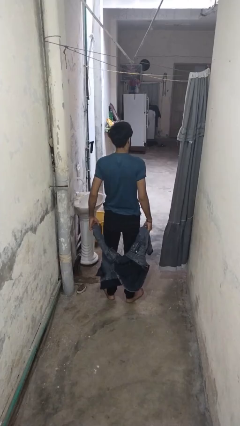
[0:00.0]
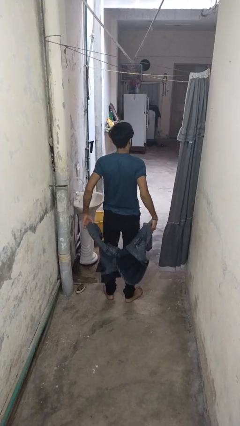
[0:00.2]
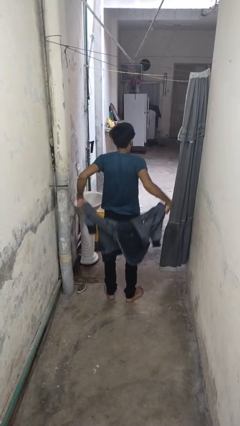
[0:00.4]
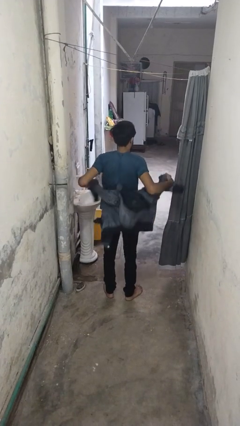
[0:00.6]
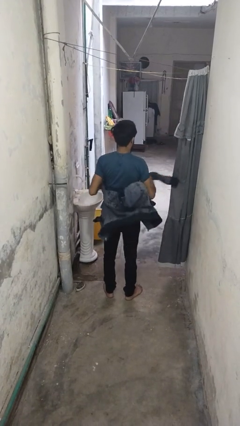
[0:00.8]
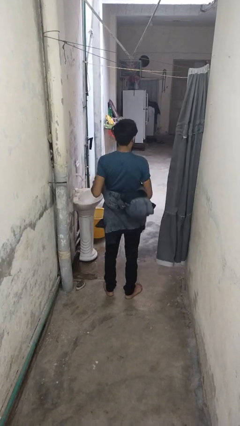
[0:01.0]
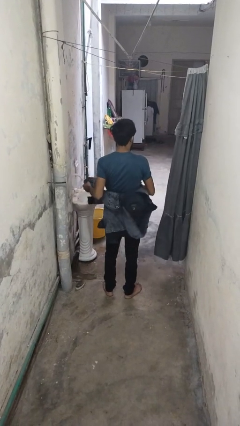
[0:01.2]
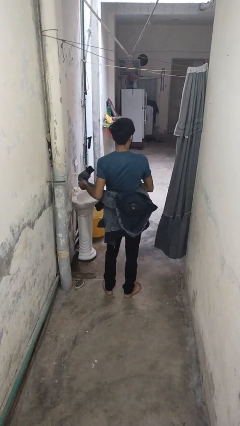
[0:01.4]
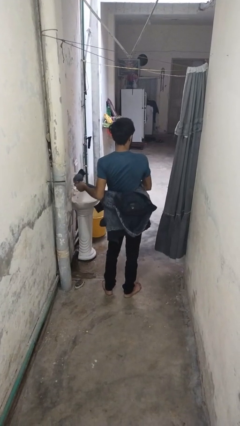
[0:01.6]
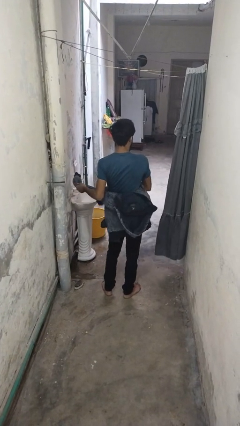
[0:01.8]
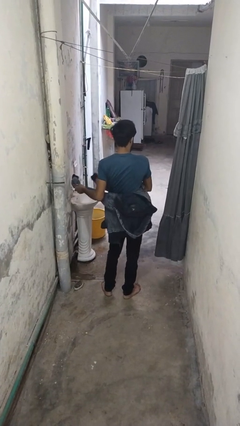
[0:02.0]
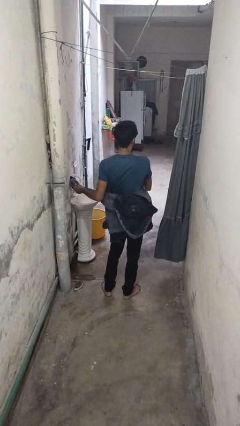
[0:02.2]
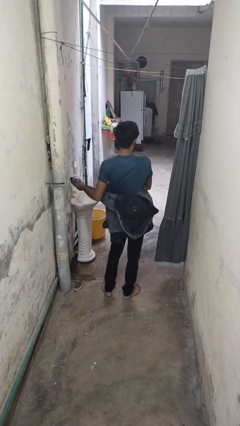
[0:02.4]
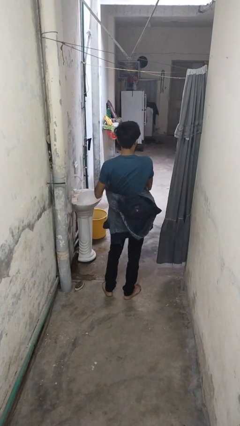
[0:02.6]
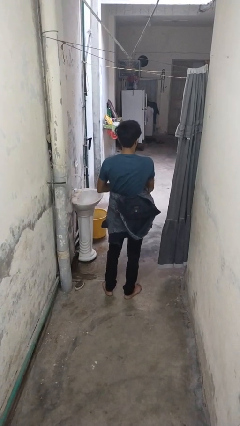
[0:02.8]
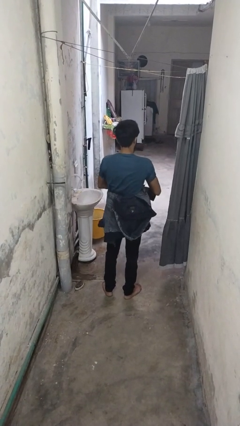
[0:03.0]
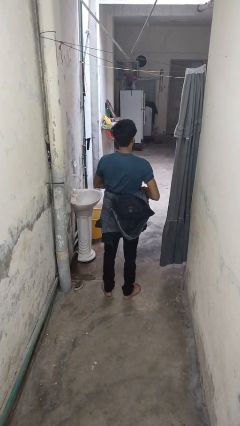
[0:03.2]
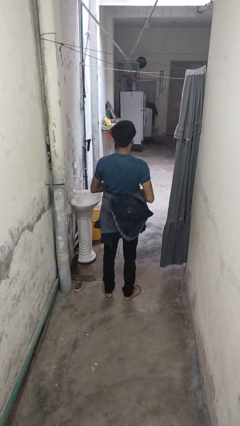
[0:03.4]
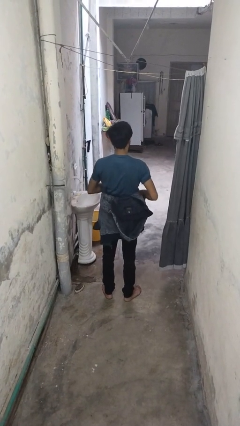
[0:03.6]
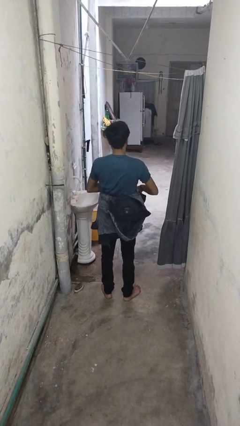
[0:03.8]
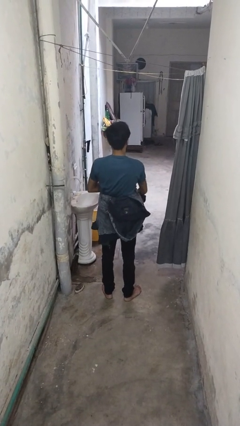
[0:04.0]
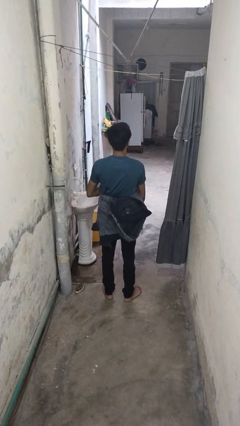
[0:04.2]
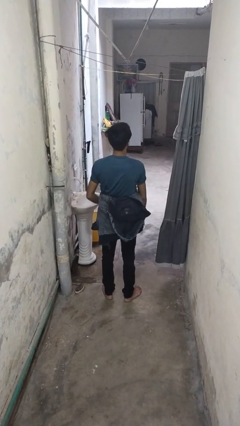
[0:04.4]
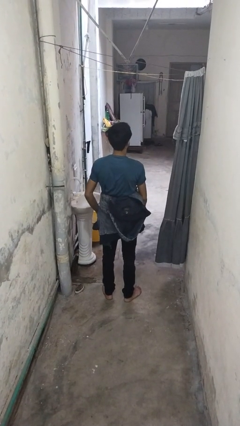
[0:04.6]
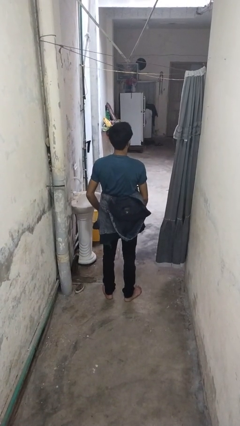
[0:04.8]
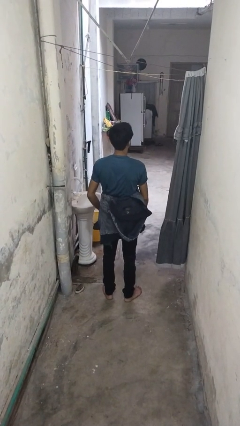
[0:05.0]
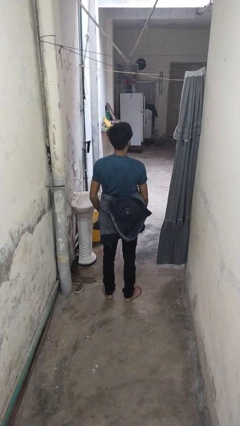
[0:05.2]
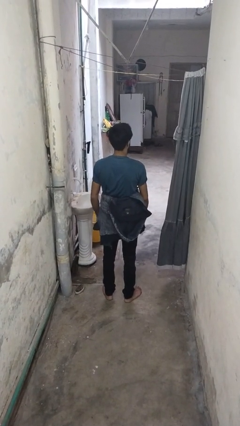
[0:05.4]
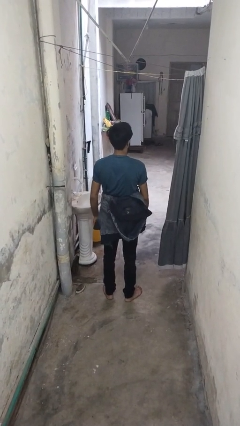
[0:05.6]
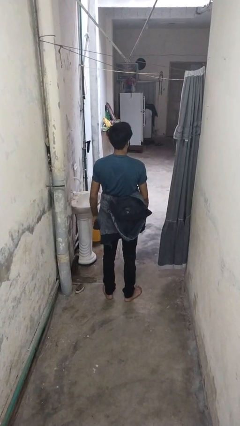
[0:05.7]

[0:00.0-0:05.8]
person ties jacket around waist

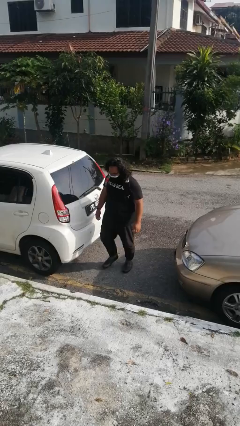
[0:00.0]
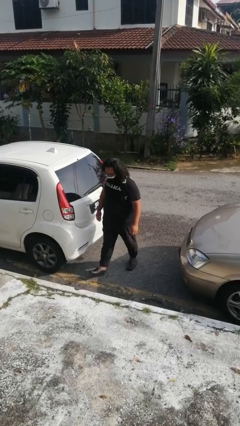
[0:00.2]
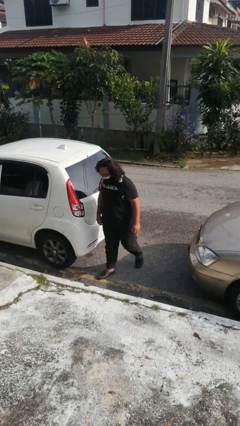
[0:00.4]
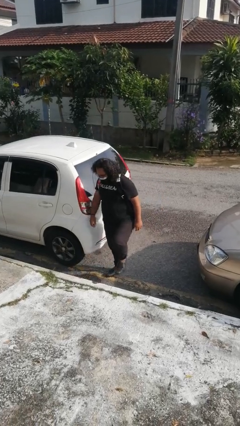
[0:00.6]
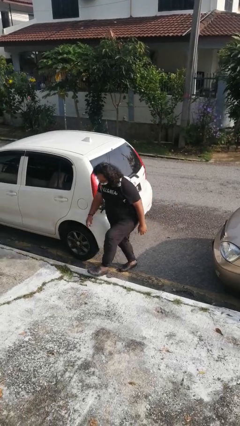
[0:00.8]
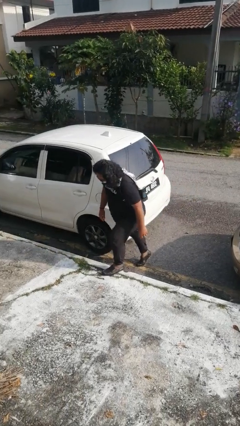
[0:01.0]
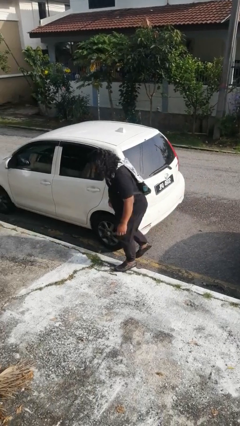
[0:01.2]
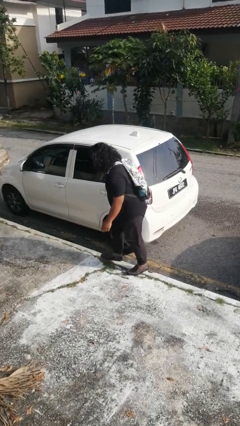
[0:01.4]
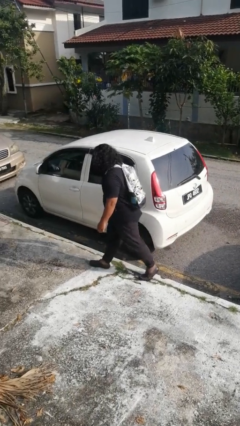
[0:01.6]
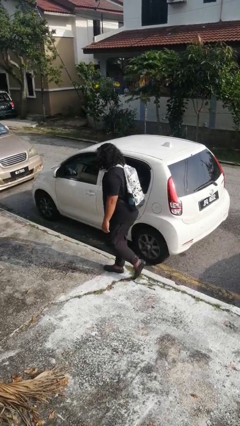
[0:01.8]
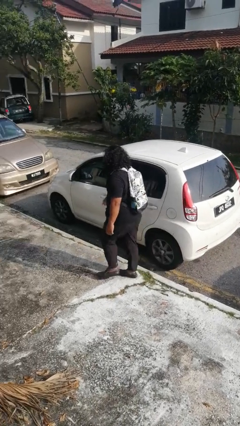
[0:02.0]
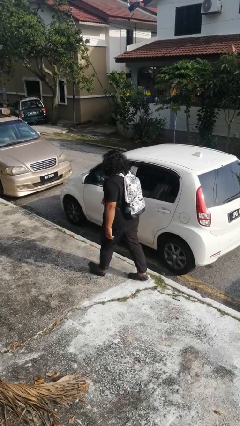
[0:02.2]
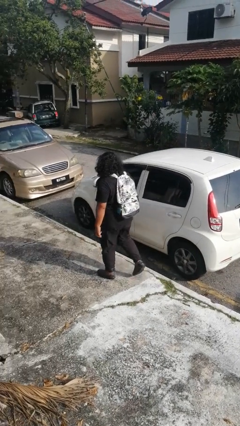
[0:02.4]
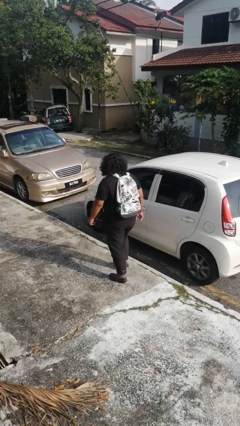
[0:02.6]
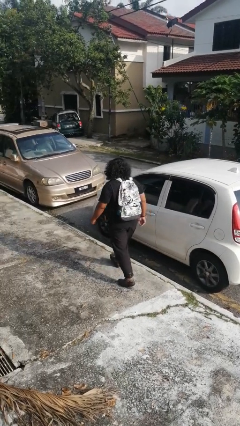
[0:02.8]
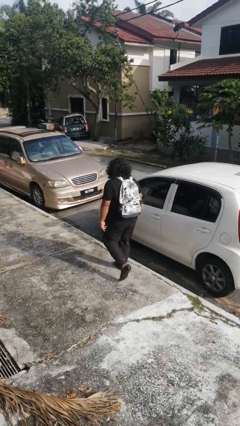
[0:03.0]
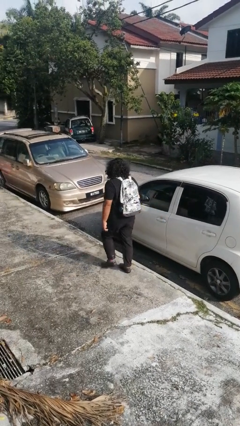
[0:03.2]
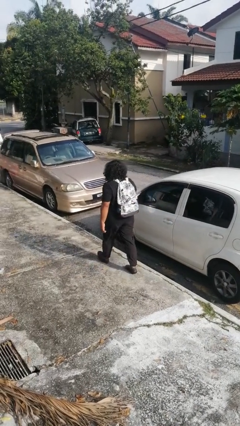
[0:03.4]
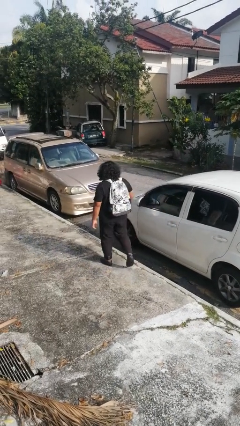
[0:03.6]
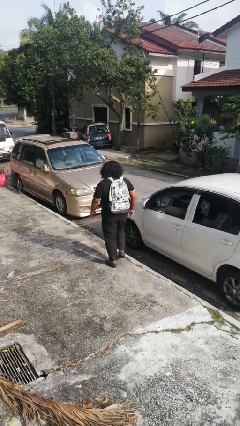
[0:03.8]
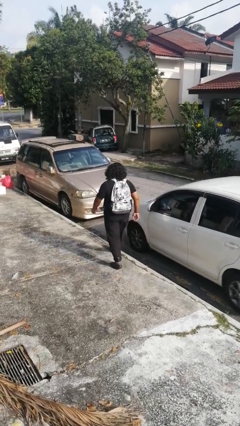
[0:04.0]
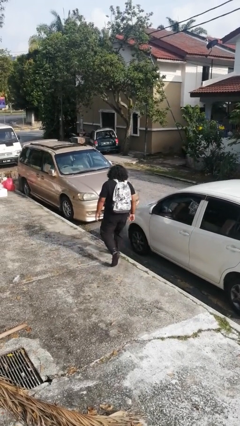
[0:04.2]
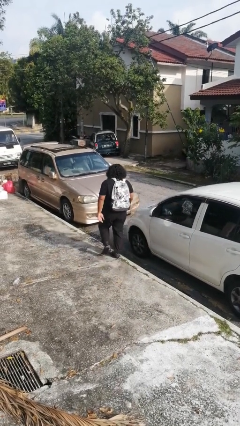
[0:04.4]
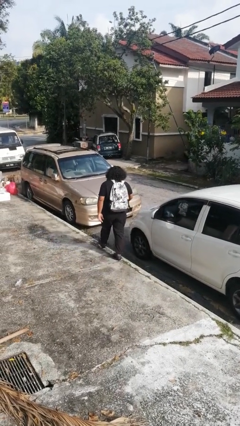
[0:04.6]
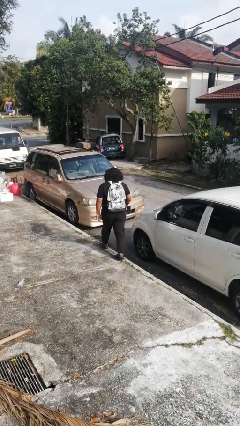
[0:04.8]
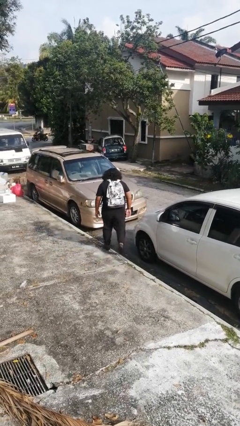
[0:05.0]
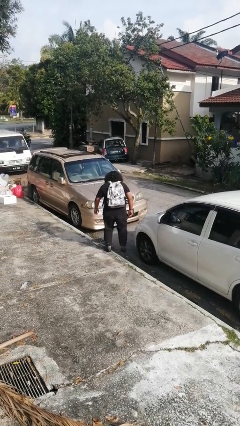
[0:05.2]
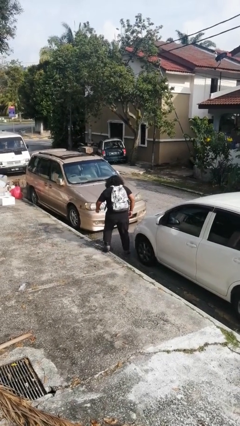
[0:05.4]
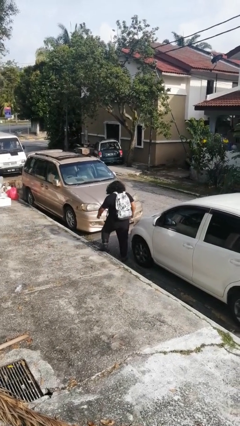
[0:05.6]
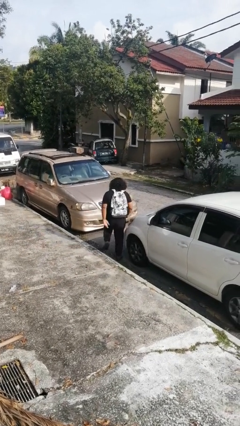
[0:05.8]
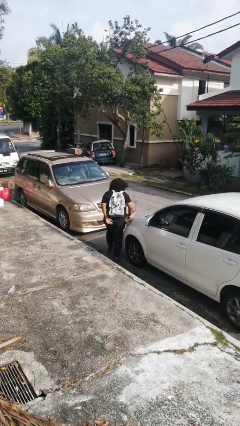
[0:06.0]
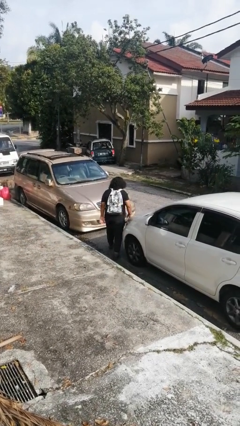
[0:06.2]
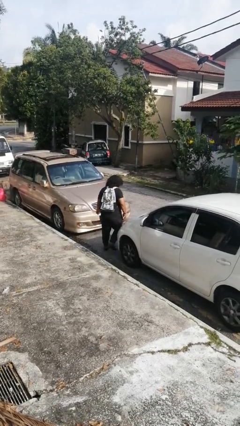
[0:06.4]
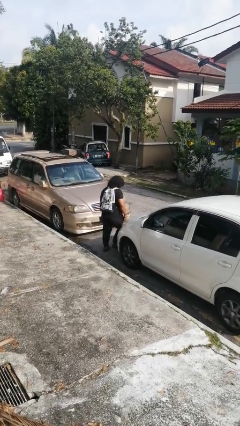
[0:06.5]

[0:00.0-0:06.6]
person walks around car

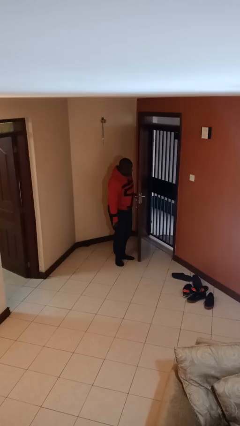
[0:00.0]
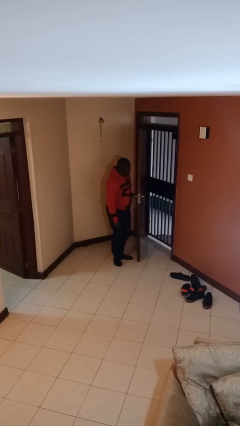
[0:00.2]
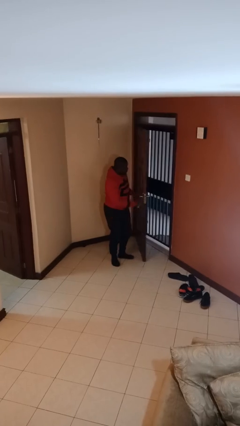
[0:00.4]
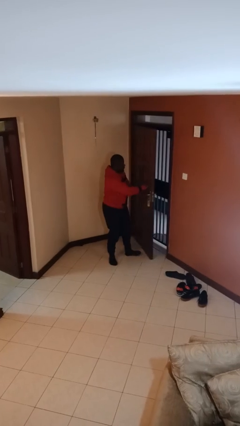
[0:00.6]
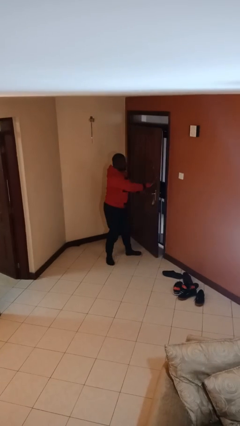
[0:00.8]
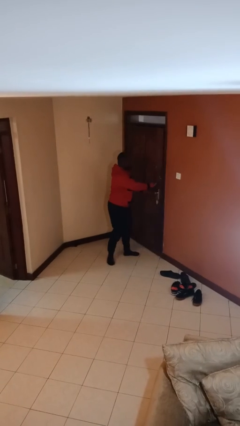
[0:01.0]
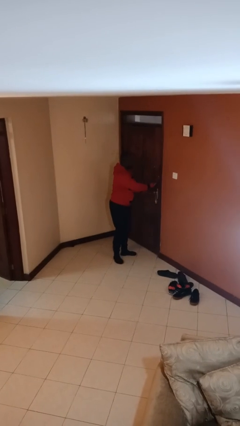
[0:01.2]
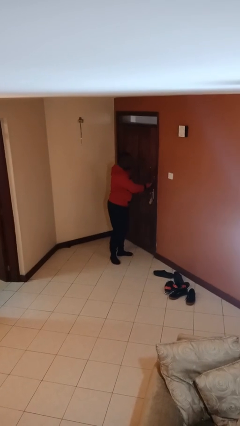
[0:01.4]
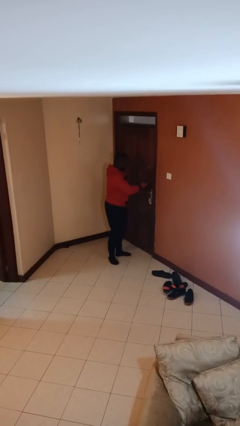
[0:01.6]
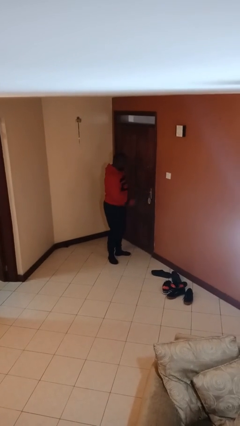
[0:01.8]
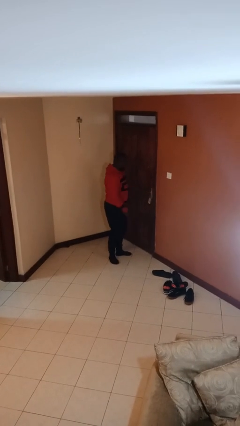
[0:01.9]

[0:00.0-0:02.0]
person closes facility door

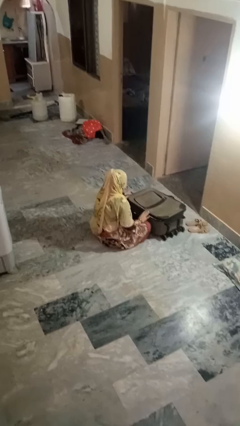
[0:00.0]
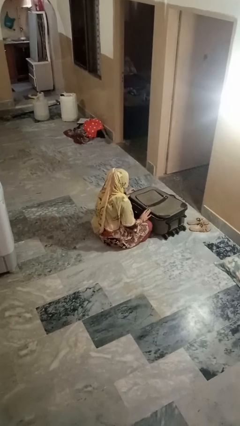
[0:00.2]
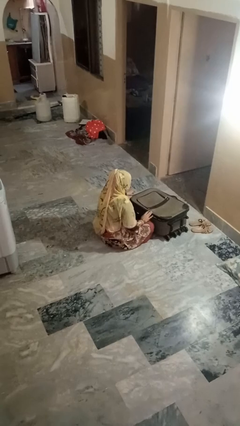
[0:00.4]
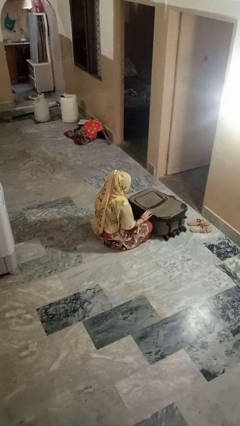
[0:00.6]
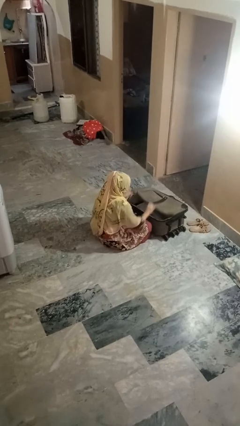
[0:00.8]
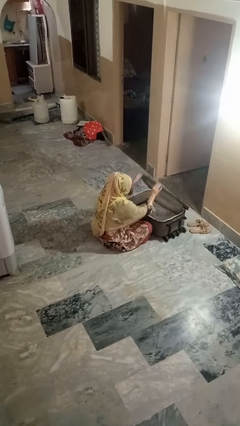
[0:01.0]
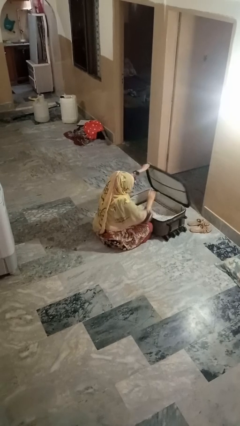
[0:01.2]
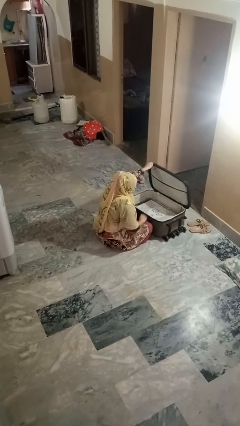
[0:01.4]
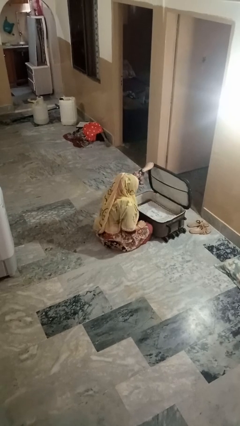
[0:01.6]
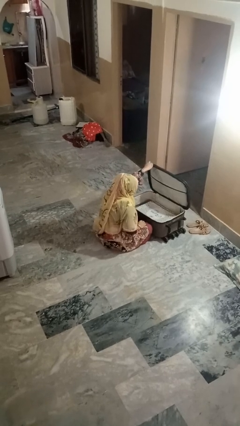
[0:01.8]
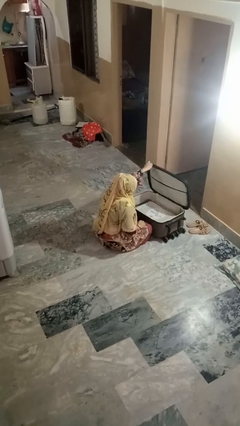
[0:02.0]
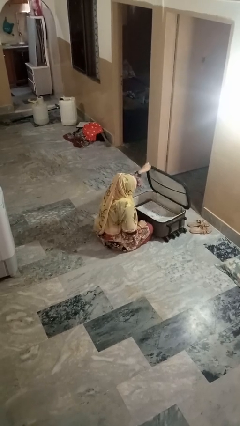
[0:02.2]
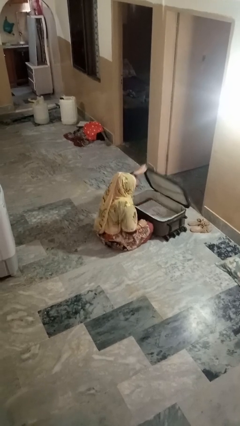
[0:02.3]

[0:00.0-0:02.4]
person opens suitcase

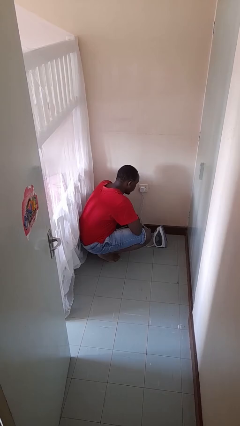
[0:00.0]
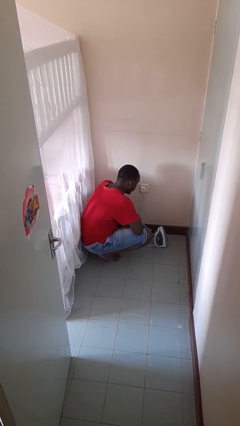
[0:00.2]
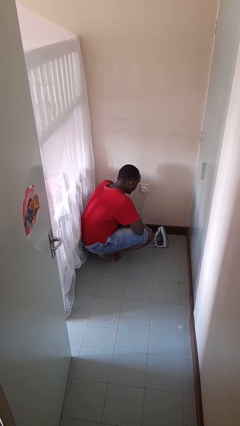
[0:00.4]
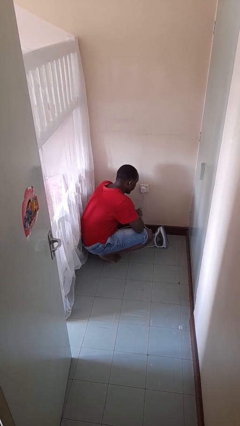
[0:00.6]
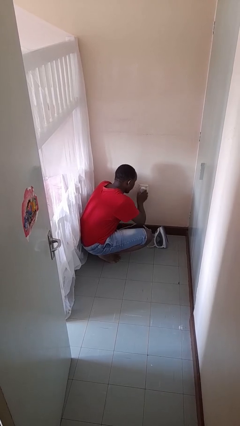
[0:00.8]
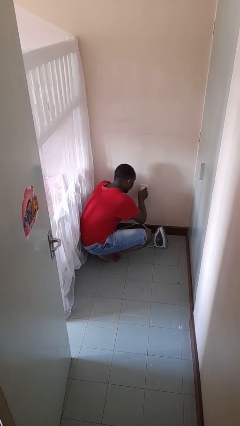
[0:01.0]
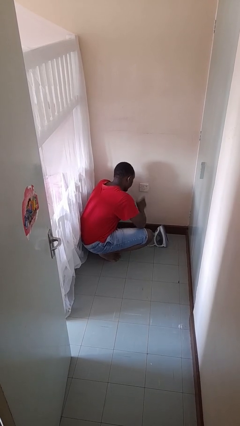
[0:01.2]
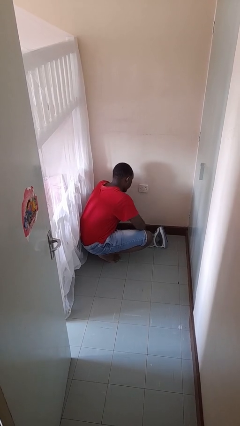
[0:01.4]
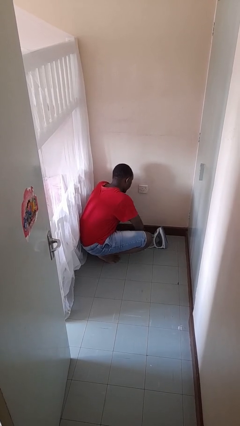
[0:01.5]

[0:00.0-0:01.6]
person unplugs from electrical socket
